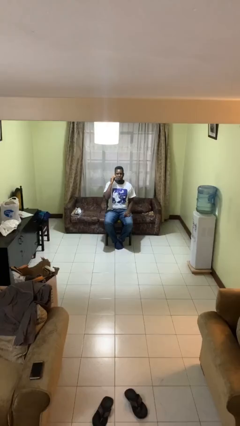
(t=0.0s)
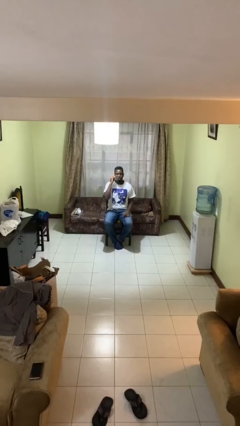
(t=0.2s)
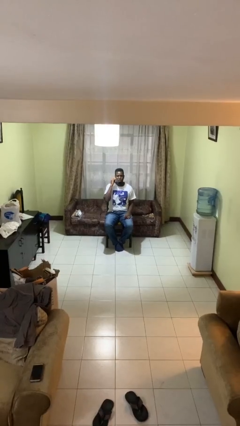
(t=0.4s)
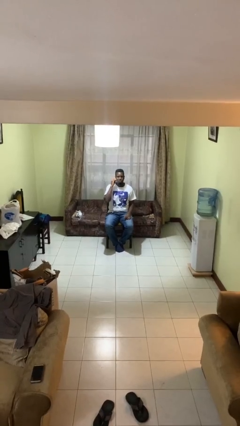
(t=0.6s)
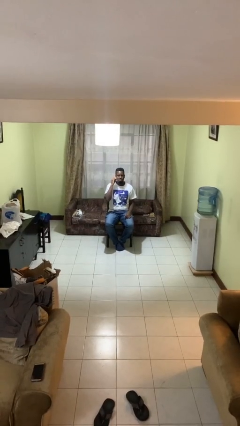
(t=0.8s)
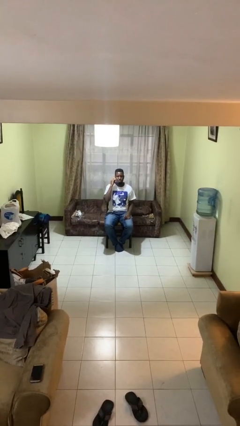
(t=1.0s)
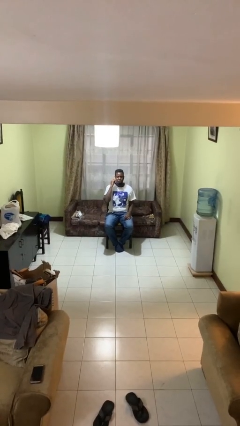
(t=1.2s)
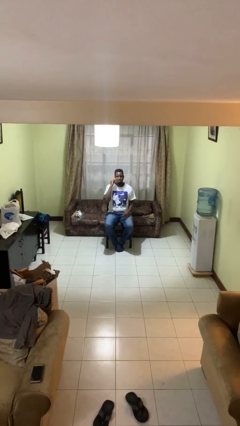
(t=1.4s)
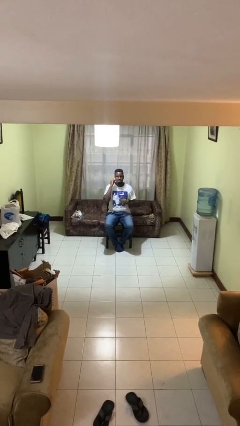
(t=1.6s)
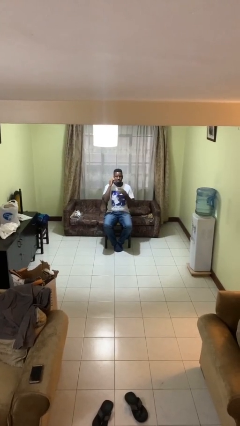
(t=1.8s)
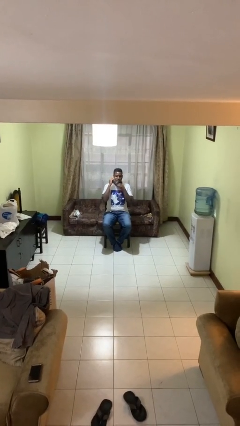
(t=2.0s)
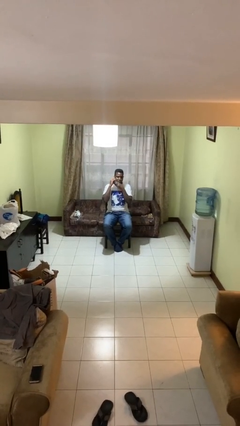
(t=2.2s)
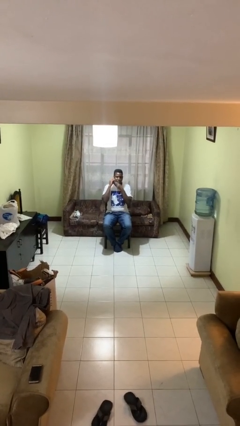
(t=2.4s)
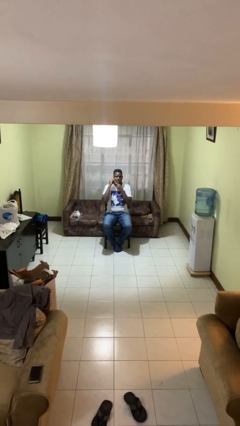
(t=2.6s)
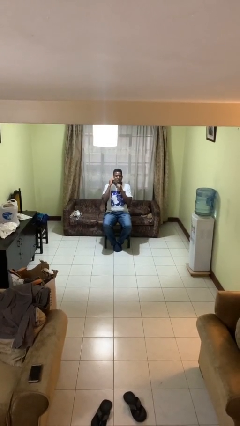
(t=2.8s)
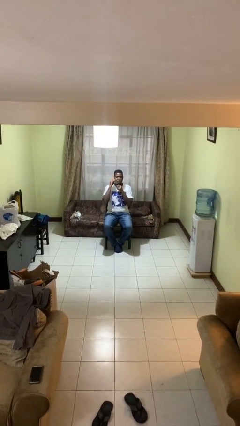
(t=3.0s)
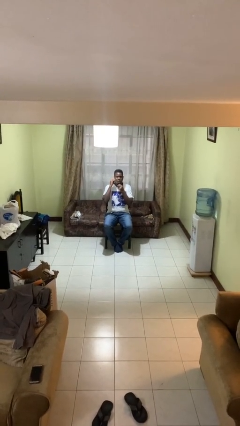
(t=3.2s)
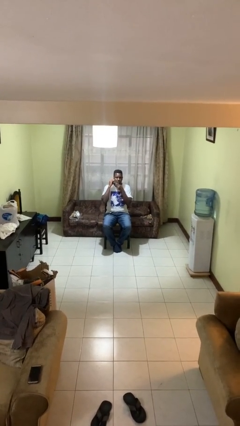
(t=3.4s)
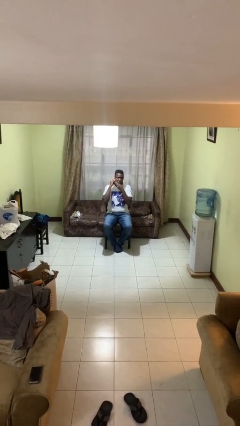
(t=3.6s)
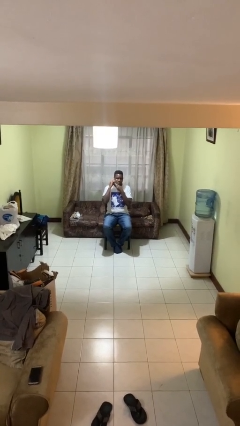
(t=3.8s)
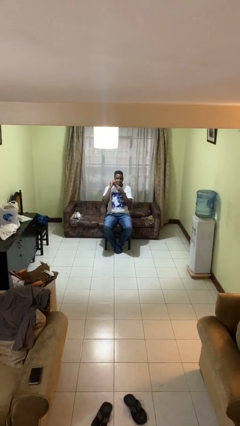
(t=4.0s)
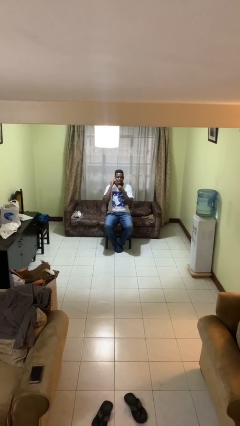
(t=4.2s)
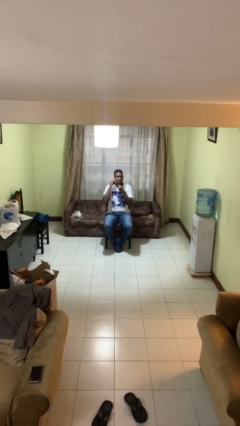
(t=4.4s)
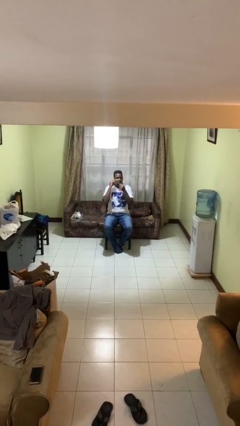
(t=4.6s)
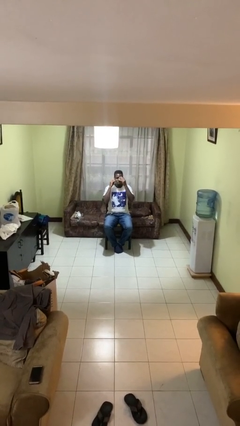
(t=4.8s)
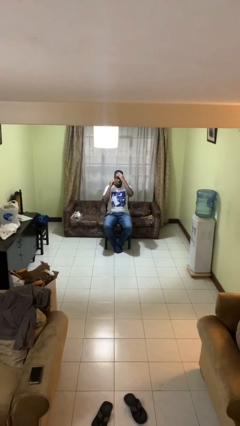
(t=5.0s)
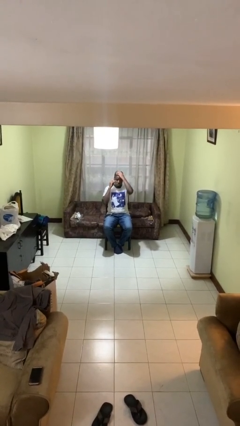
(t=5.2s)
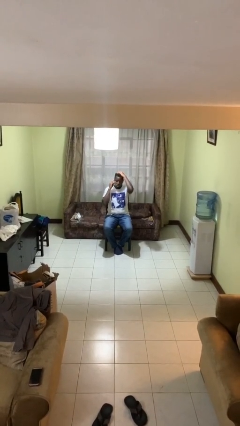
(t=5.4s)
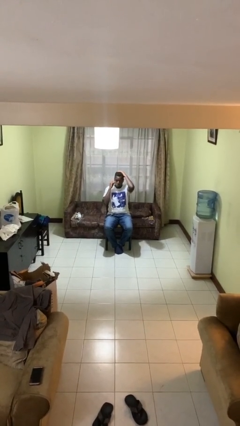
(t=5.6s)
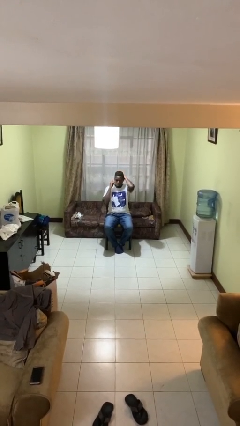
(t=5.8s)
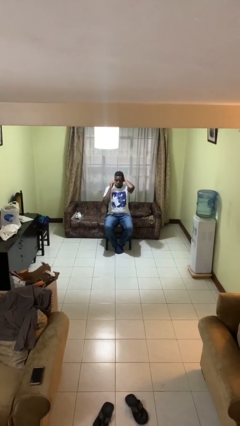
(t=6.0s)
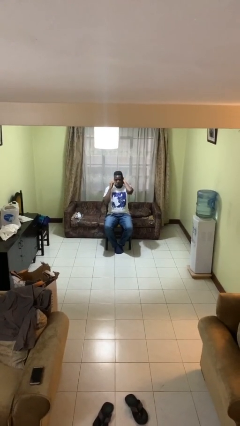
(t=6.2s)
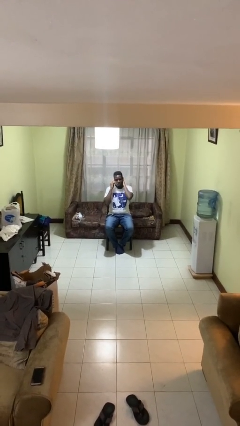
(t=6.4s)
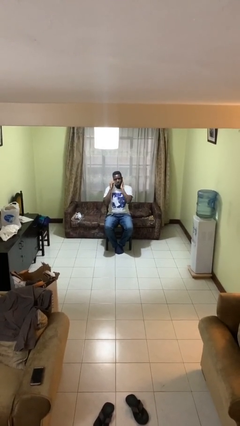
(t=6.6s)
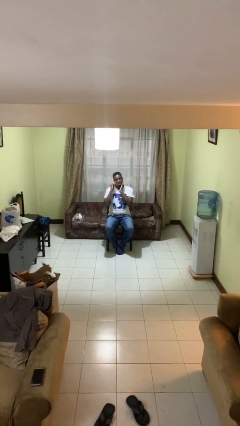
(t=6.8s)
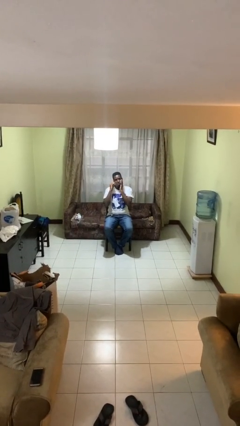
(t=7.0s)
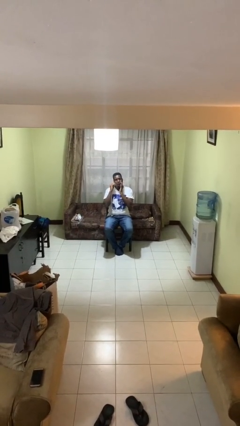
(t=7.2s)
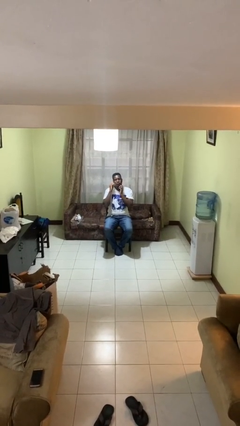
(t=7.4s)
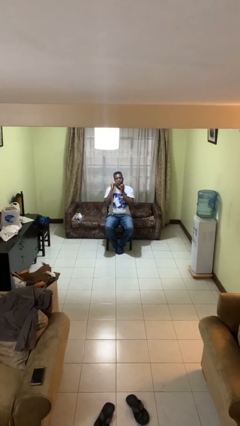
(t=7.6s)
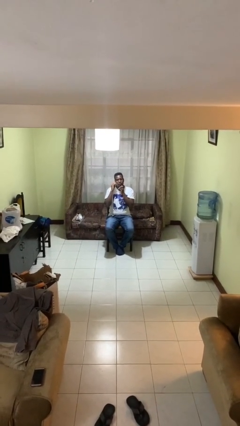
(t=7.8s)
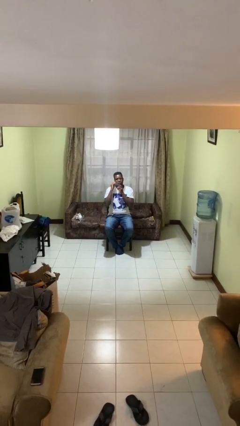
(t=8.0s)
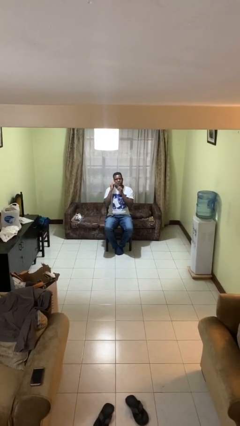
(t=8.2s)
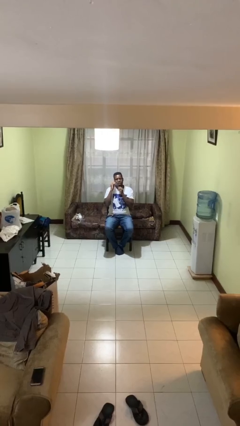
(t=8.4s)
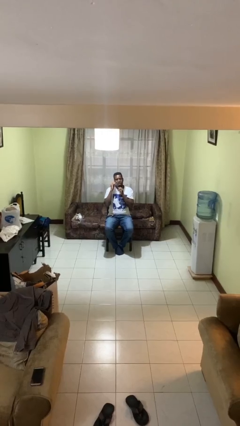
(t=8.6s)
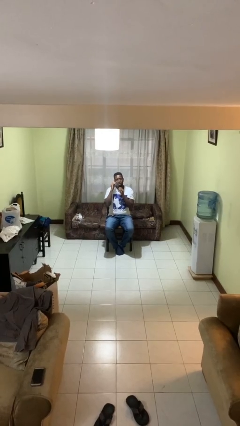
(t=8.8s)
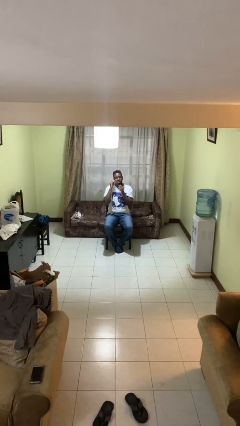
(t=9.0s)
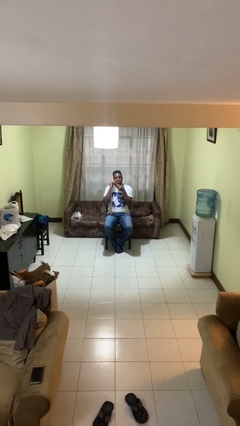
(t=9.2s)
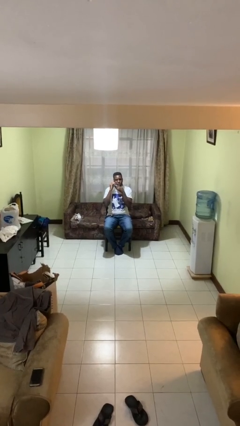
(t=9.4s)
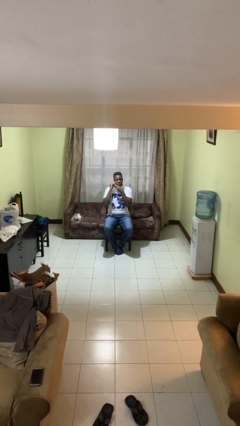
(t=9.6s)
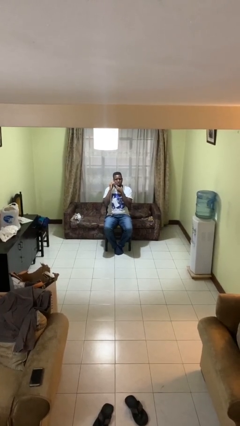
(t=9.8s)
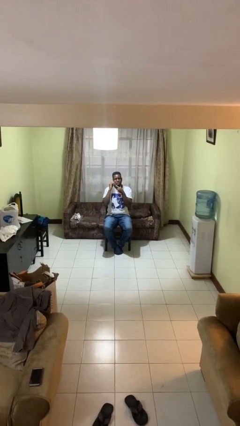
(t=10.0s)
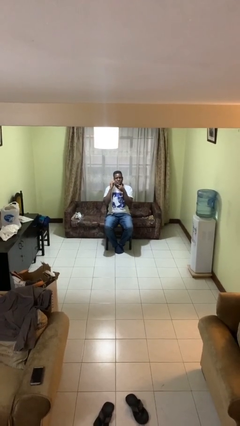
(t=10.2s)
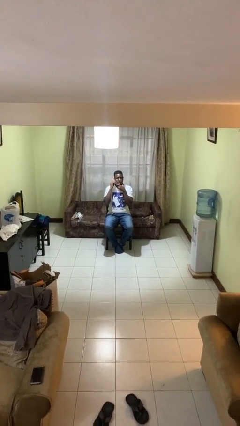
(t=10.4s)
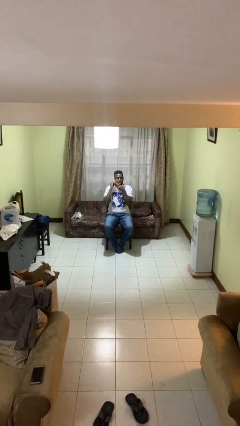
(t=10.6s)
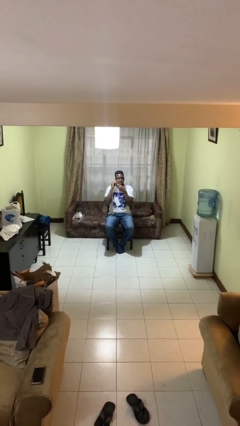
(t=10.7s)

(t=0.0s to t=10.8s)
person talks on phone

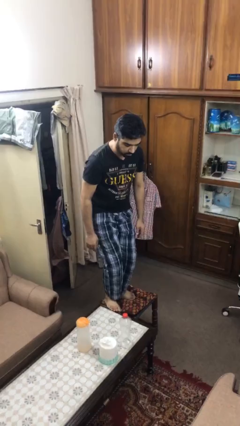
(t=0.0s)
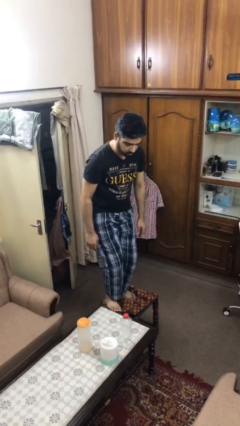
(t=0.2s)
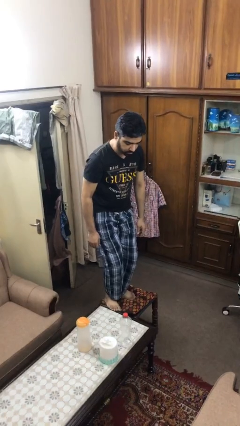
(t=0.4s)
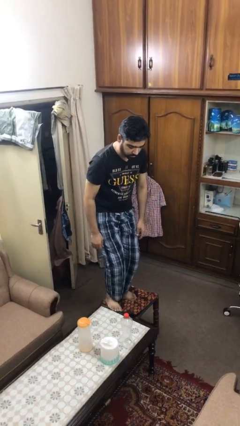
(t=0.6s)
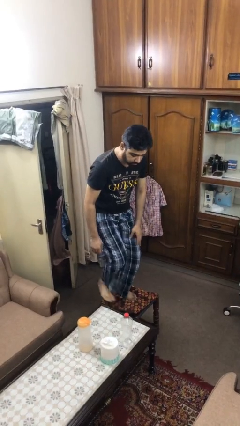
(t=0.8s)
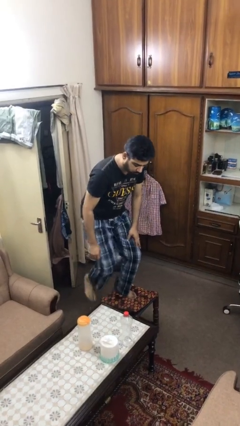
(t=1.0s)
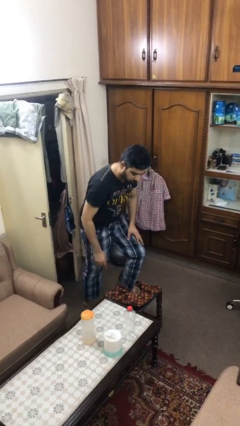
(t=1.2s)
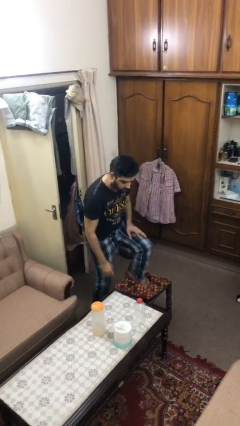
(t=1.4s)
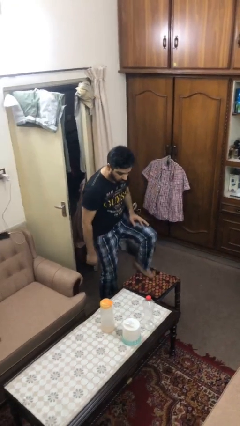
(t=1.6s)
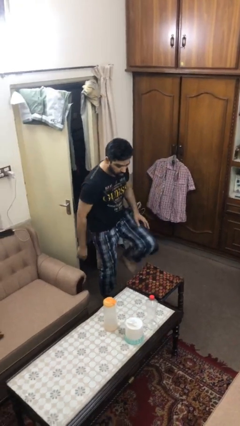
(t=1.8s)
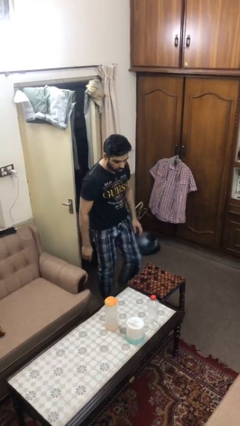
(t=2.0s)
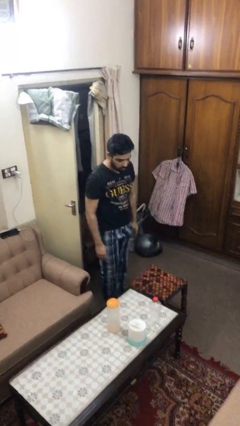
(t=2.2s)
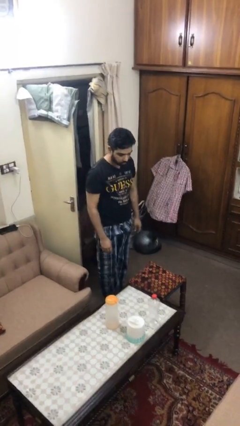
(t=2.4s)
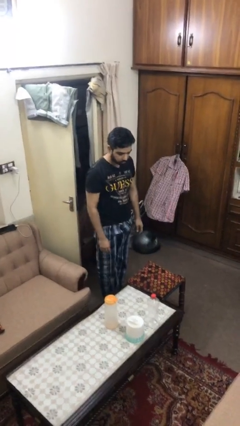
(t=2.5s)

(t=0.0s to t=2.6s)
person climbs off table

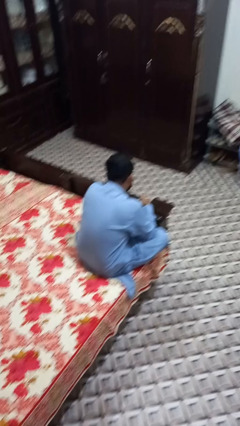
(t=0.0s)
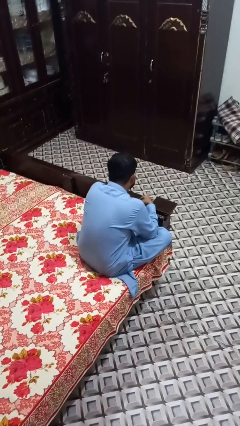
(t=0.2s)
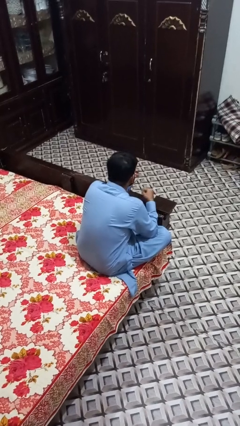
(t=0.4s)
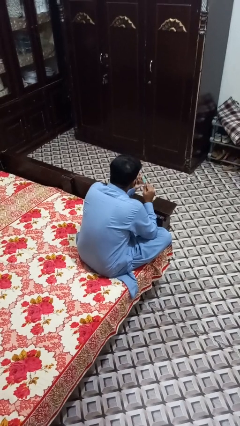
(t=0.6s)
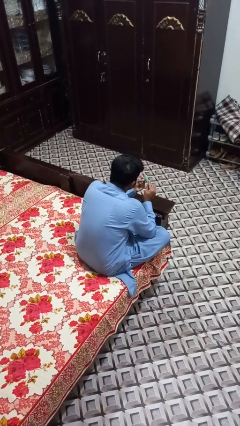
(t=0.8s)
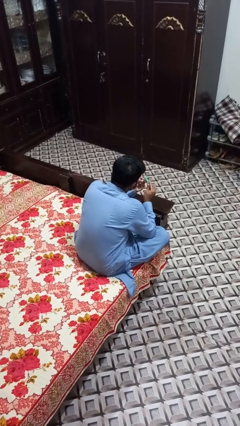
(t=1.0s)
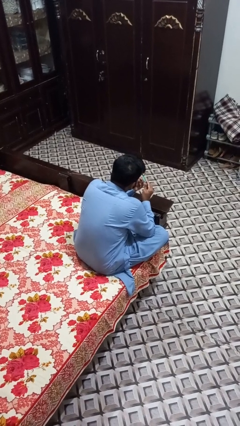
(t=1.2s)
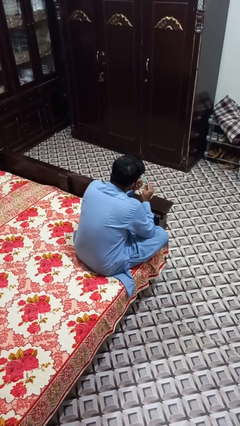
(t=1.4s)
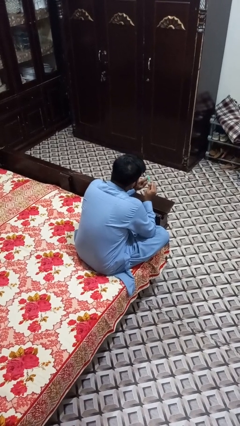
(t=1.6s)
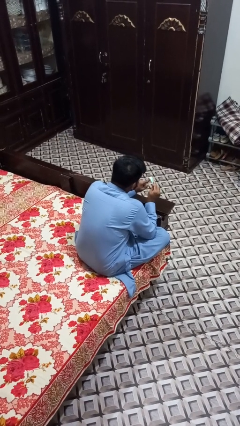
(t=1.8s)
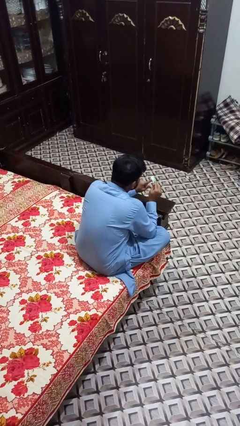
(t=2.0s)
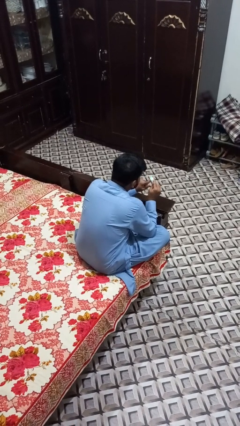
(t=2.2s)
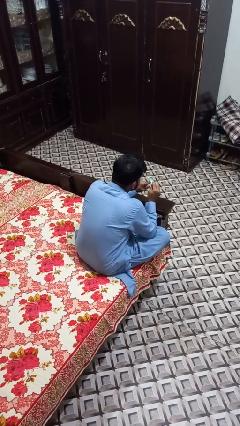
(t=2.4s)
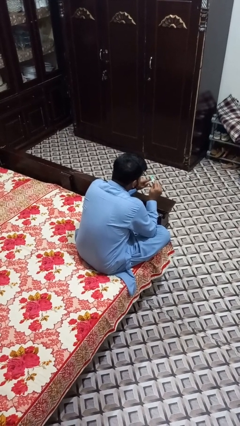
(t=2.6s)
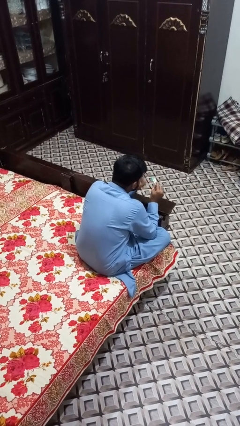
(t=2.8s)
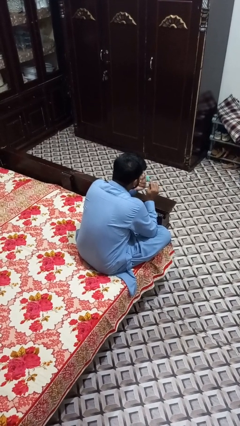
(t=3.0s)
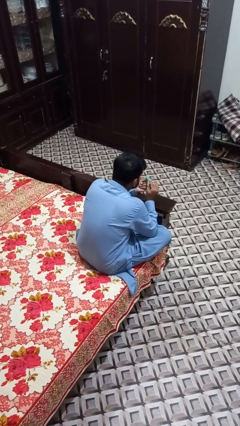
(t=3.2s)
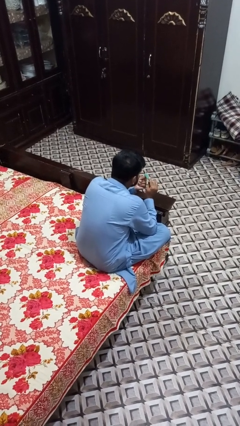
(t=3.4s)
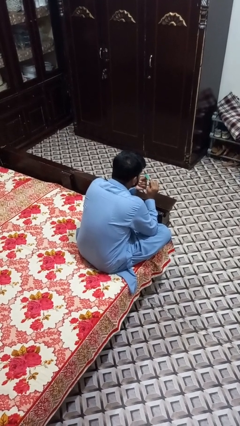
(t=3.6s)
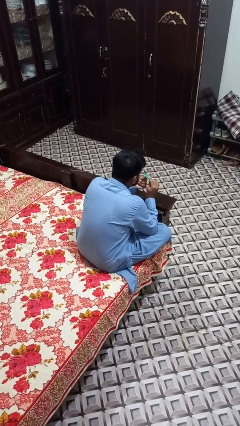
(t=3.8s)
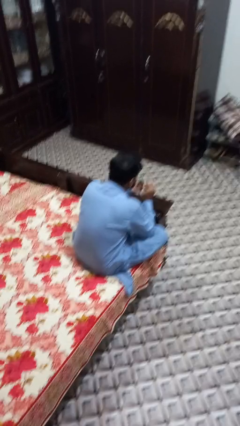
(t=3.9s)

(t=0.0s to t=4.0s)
person files fingernails

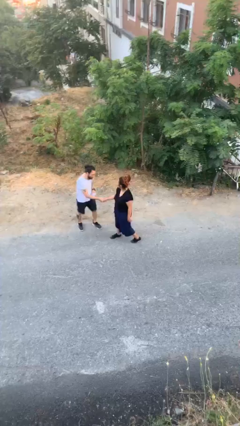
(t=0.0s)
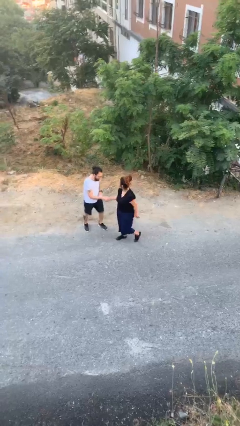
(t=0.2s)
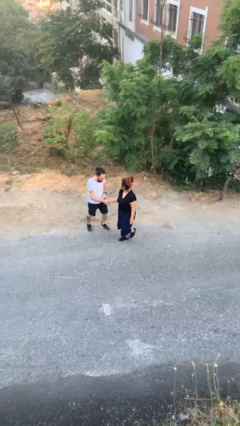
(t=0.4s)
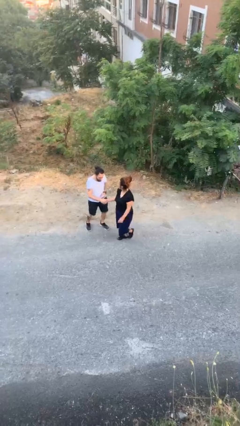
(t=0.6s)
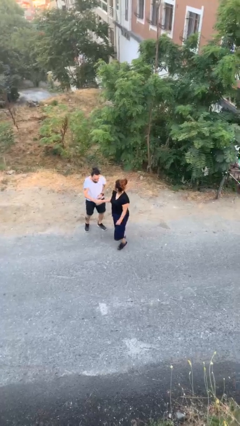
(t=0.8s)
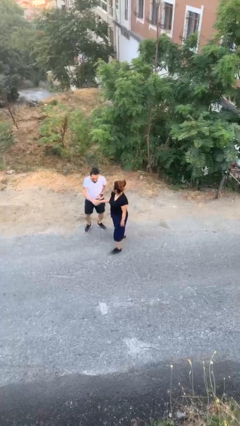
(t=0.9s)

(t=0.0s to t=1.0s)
person shakes hand
